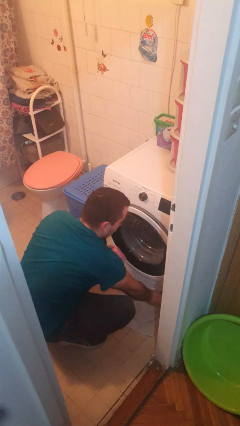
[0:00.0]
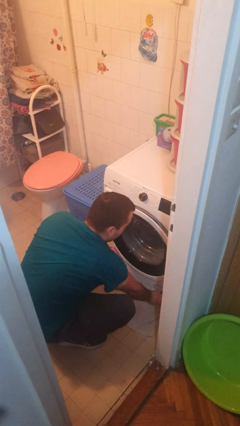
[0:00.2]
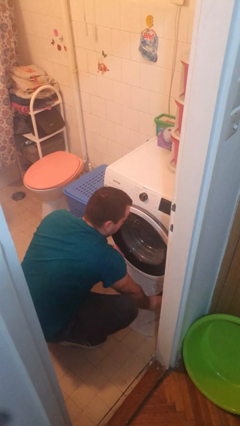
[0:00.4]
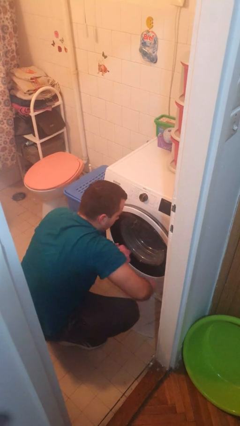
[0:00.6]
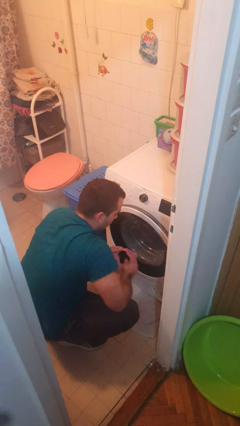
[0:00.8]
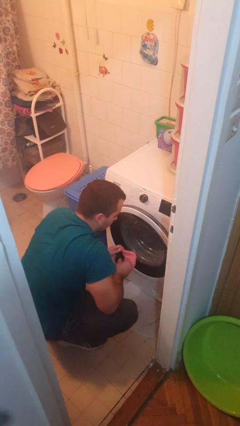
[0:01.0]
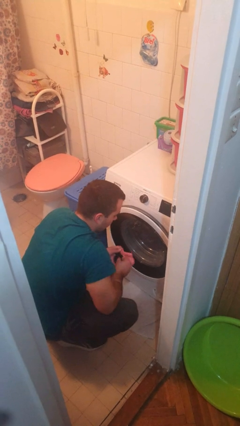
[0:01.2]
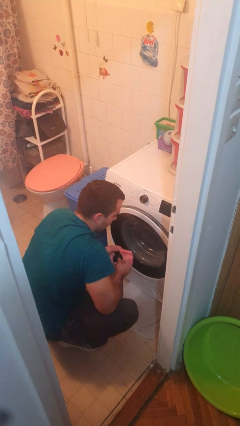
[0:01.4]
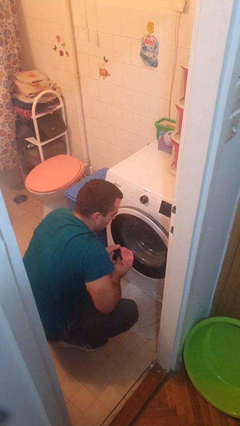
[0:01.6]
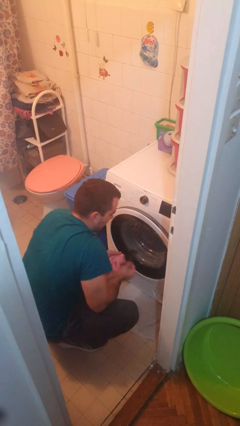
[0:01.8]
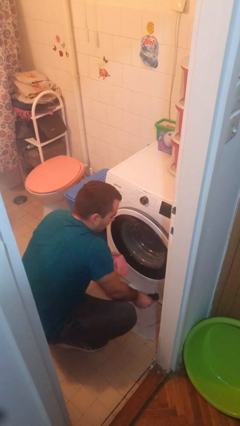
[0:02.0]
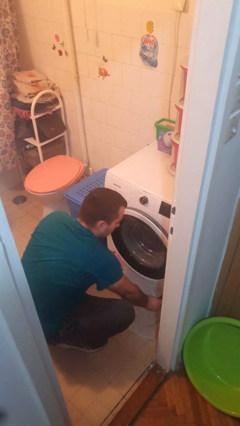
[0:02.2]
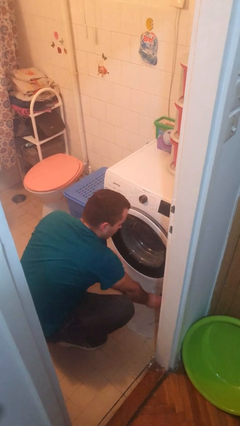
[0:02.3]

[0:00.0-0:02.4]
person cleans dryer lint trap

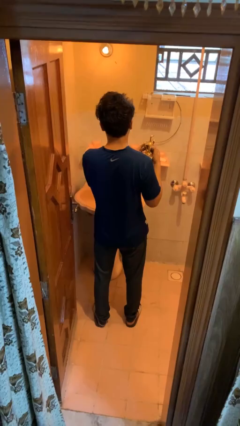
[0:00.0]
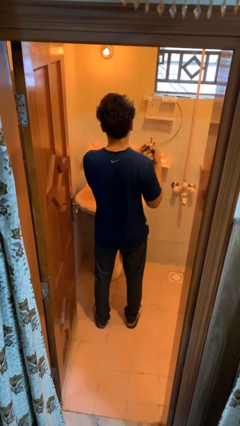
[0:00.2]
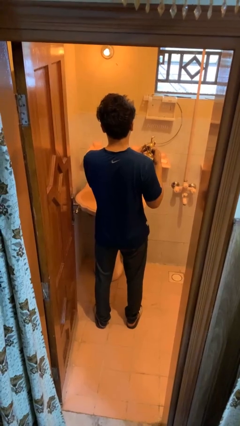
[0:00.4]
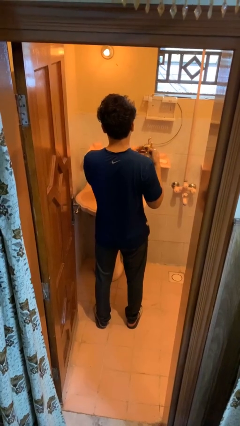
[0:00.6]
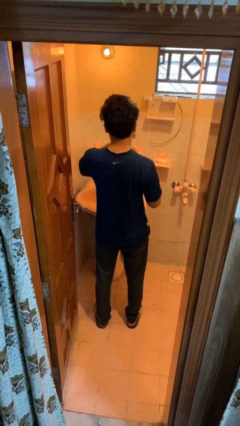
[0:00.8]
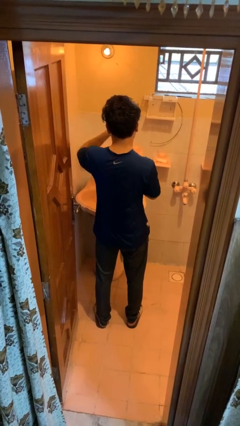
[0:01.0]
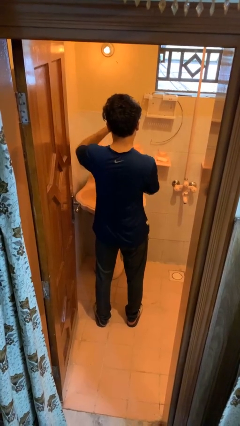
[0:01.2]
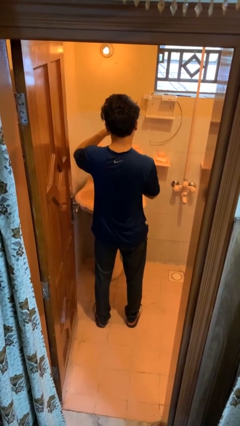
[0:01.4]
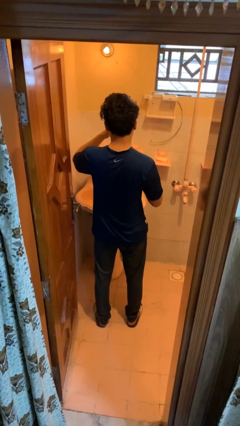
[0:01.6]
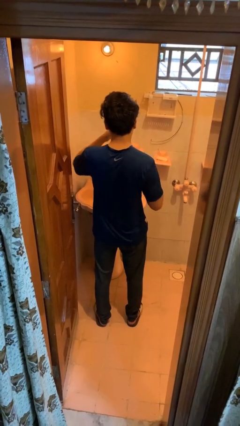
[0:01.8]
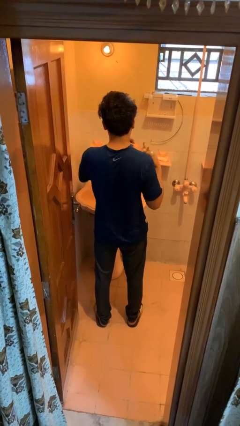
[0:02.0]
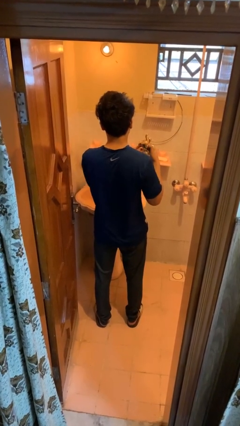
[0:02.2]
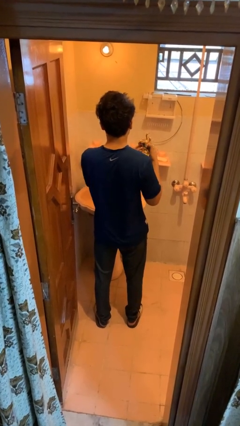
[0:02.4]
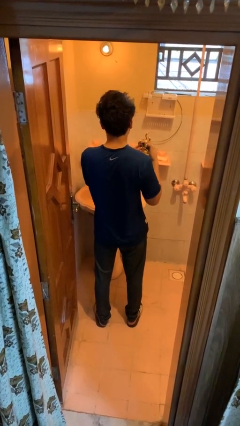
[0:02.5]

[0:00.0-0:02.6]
person applies deodorant

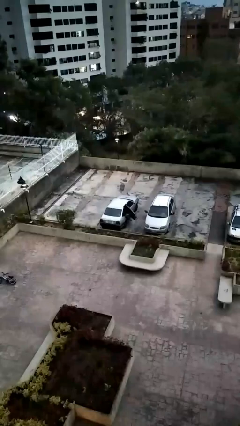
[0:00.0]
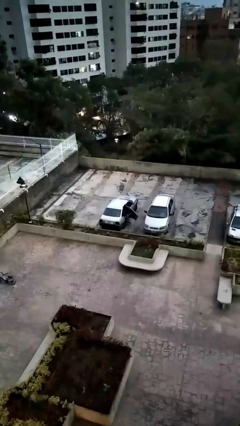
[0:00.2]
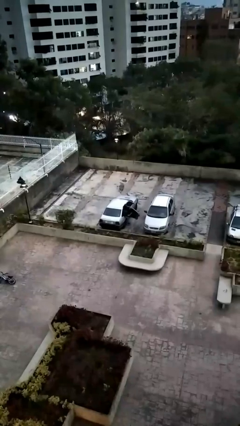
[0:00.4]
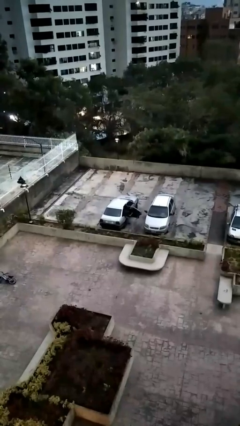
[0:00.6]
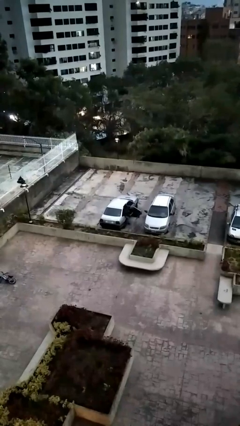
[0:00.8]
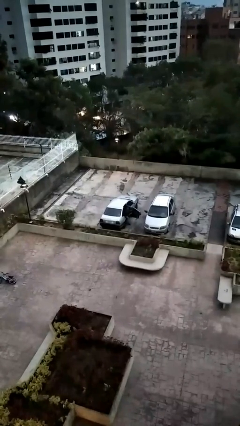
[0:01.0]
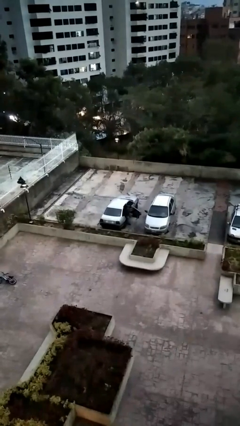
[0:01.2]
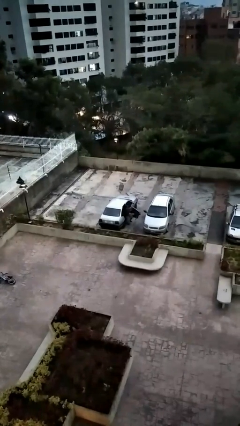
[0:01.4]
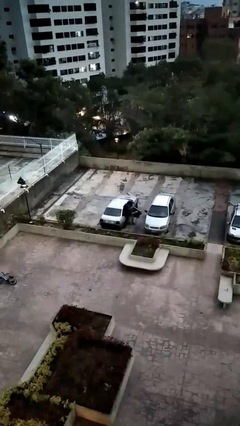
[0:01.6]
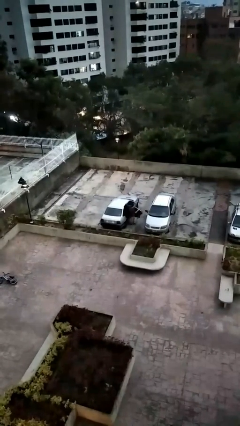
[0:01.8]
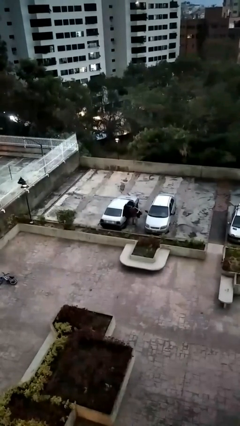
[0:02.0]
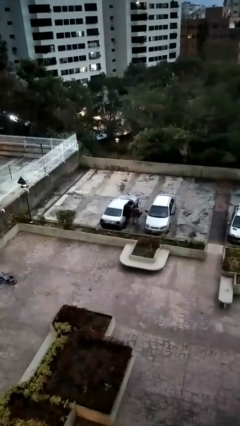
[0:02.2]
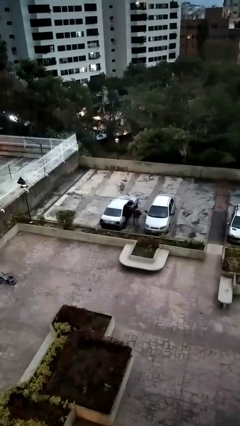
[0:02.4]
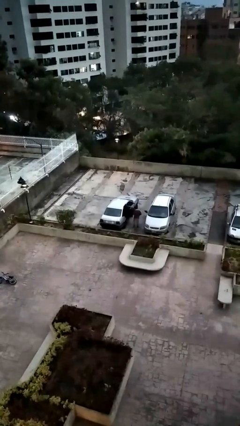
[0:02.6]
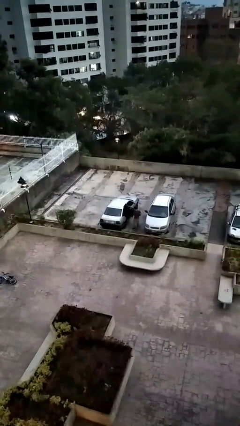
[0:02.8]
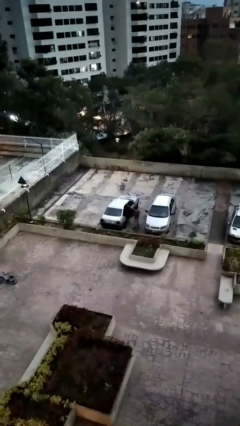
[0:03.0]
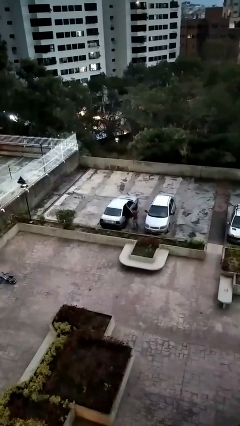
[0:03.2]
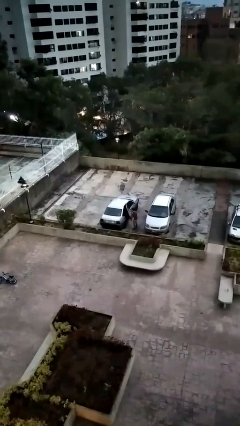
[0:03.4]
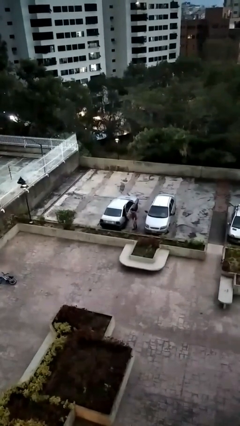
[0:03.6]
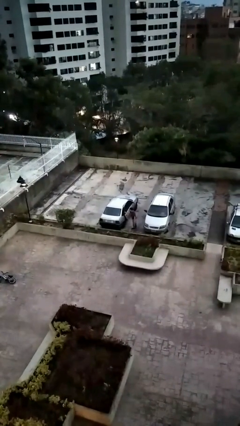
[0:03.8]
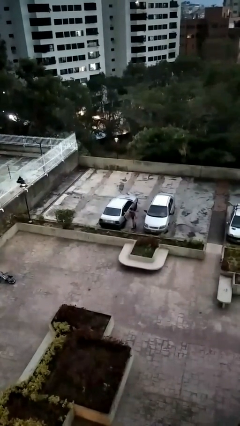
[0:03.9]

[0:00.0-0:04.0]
car drops off person

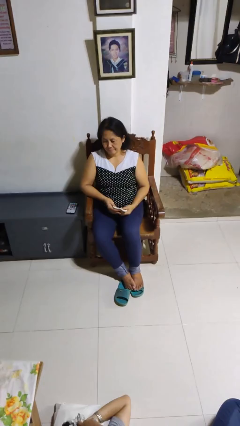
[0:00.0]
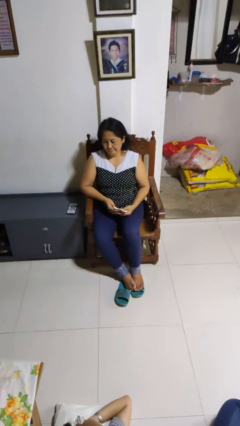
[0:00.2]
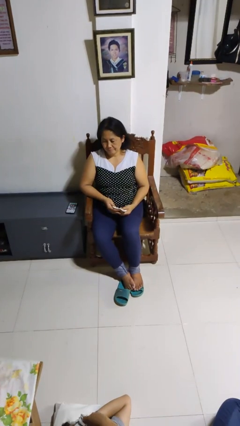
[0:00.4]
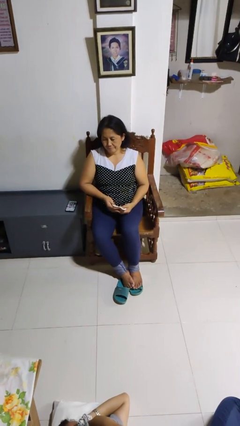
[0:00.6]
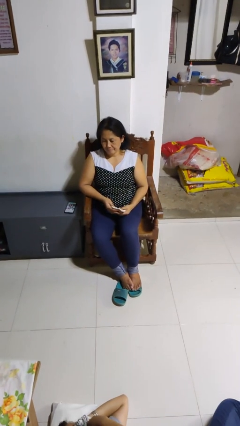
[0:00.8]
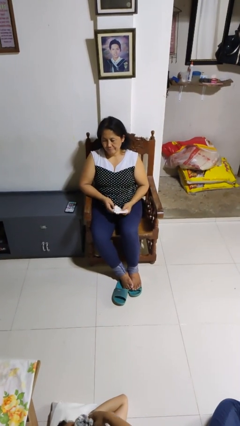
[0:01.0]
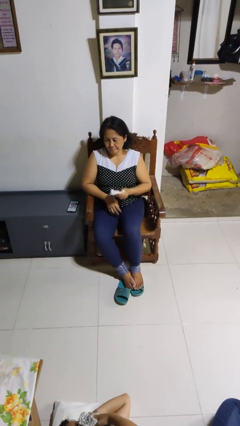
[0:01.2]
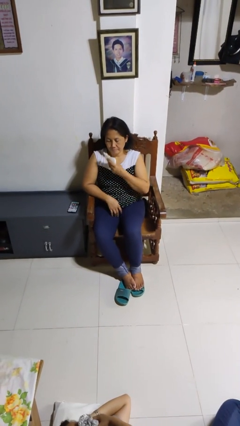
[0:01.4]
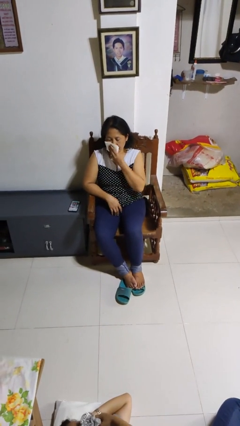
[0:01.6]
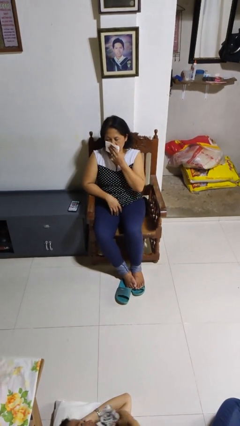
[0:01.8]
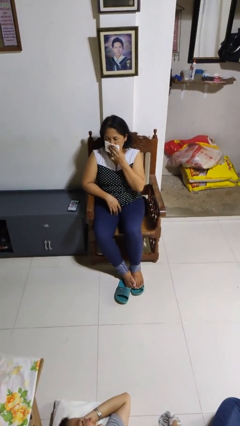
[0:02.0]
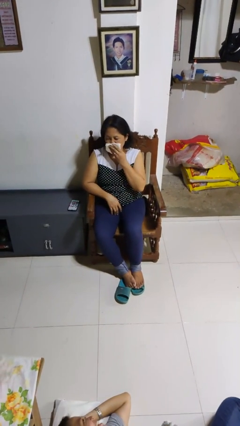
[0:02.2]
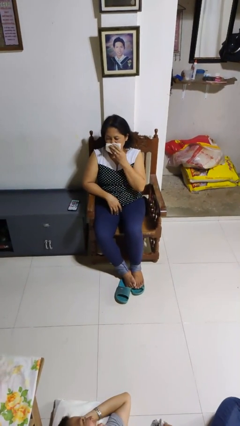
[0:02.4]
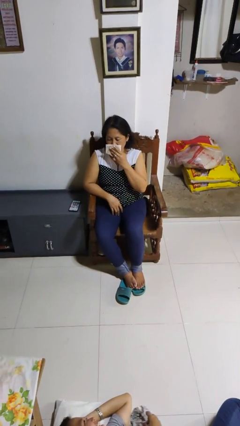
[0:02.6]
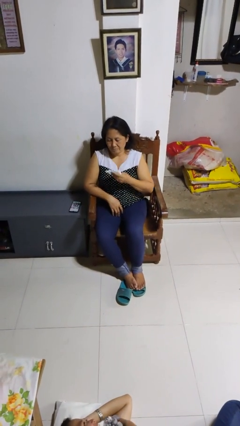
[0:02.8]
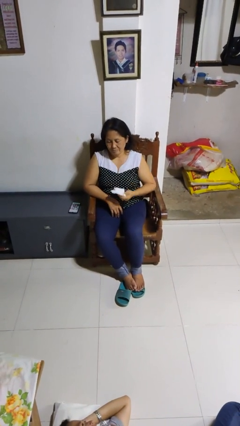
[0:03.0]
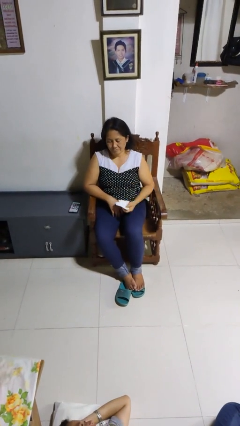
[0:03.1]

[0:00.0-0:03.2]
person wipes mouth with napkin

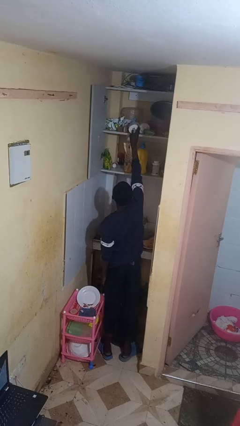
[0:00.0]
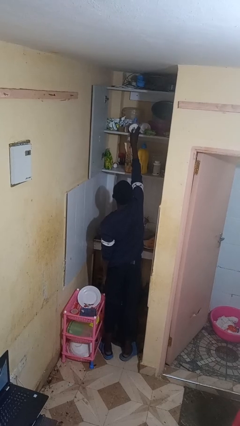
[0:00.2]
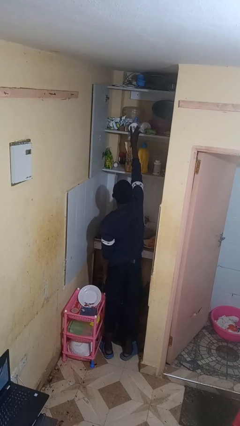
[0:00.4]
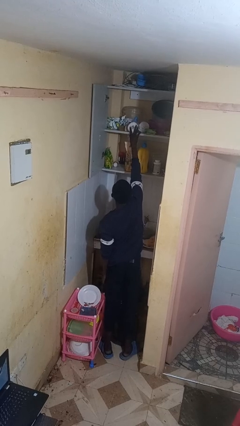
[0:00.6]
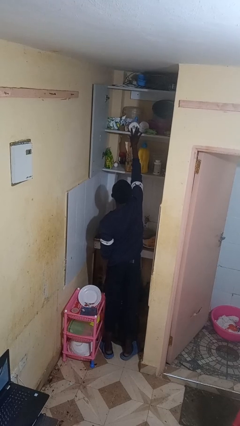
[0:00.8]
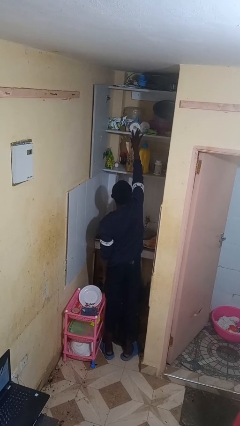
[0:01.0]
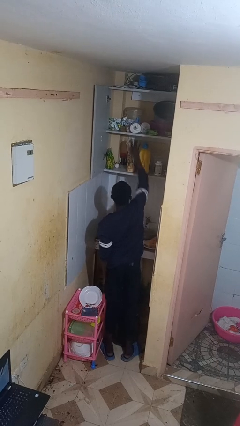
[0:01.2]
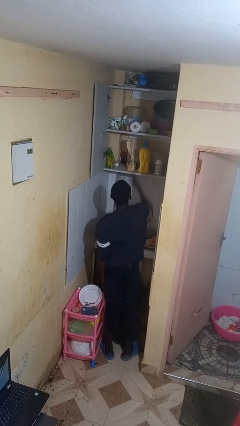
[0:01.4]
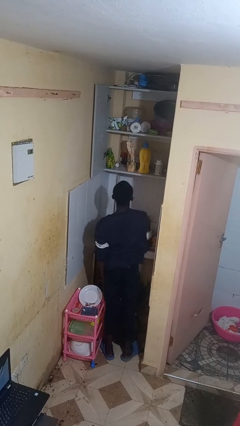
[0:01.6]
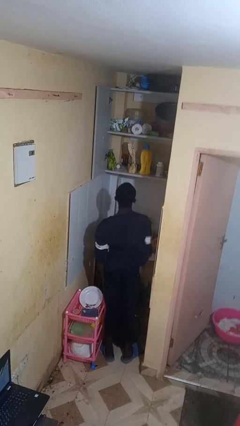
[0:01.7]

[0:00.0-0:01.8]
person puts object in cabinet

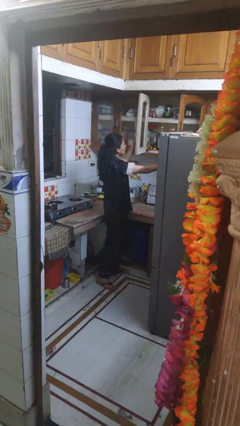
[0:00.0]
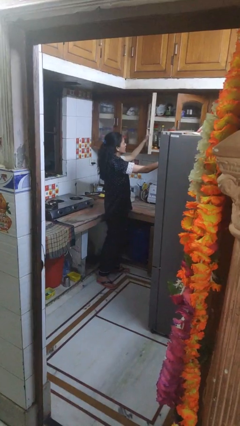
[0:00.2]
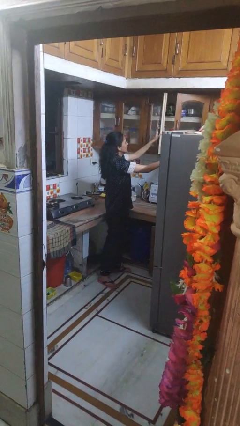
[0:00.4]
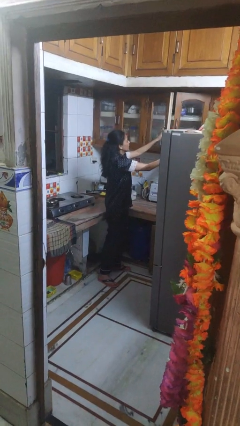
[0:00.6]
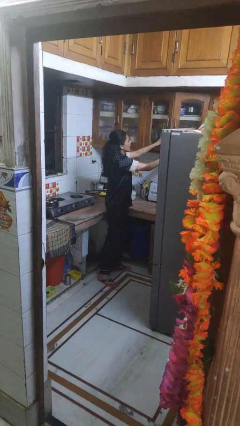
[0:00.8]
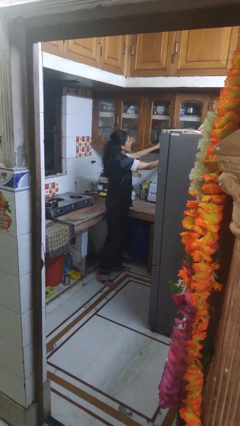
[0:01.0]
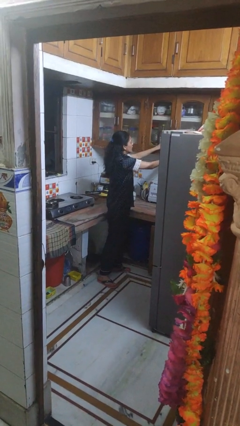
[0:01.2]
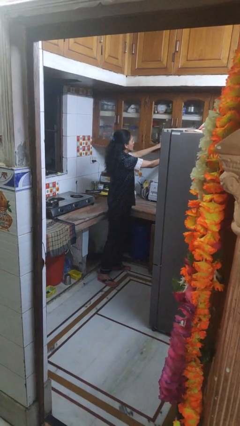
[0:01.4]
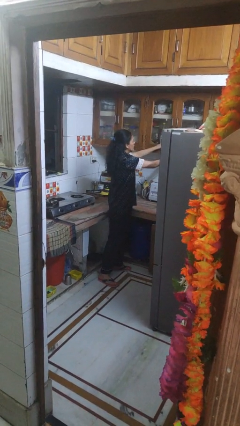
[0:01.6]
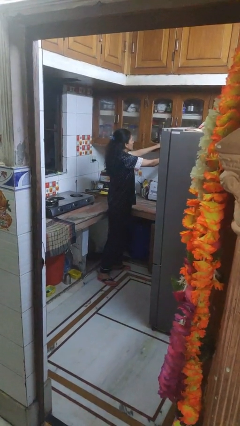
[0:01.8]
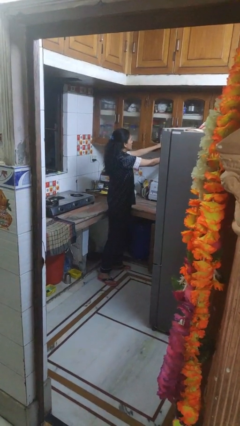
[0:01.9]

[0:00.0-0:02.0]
person closes cabinet

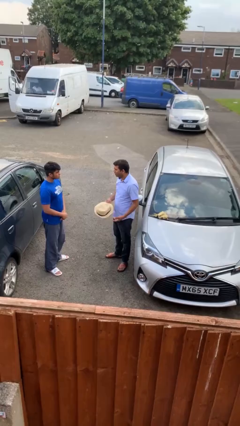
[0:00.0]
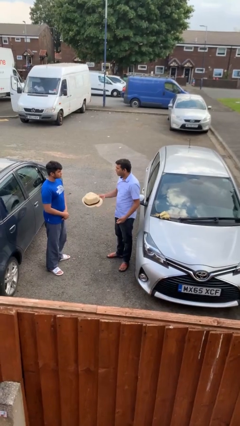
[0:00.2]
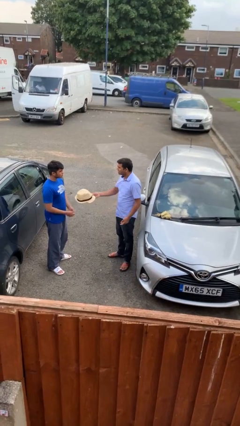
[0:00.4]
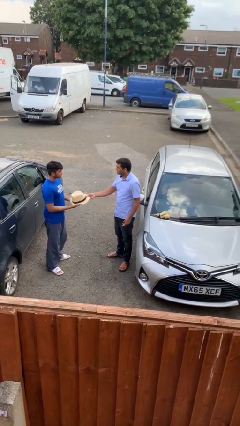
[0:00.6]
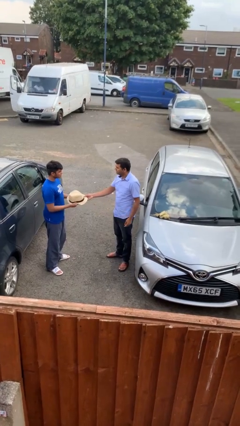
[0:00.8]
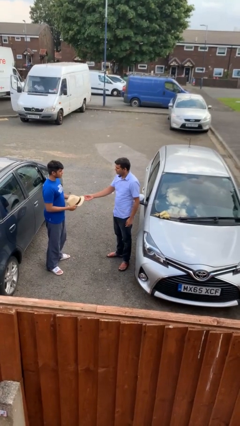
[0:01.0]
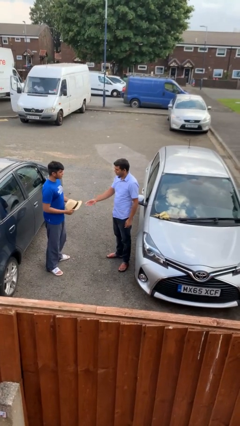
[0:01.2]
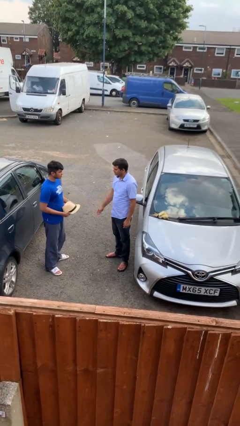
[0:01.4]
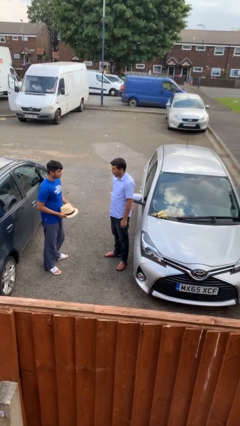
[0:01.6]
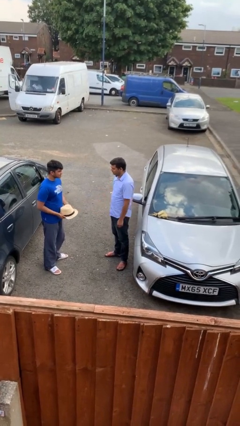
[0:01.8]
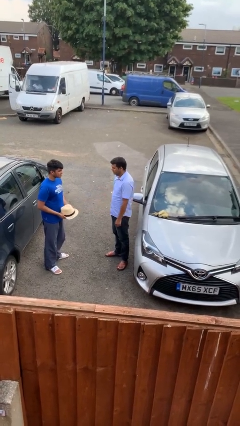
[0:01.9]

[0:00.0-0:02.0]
person transfers object to person
